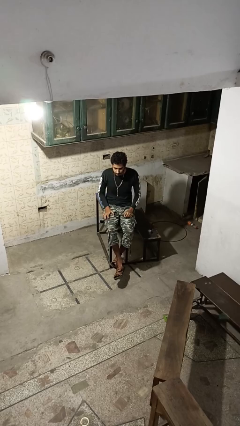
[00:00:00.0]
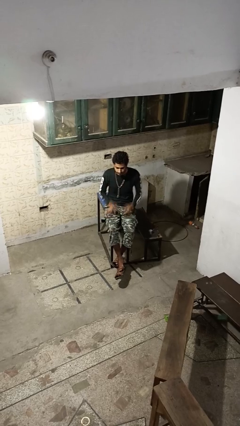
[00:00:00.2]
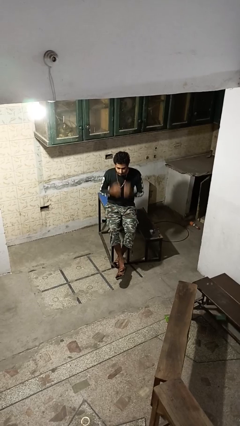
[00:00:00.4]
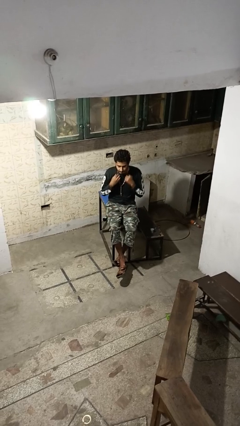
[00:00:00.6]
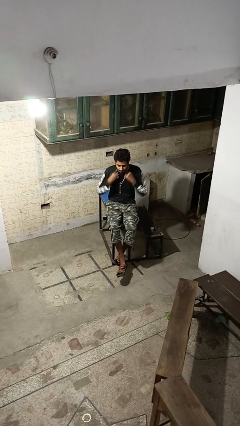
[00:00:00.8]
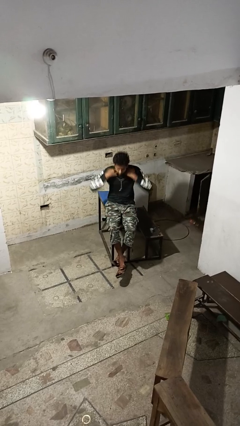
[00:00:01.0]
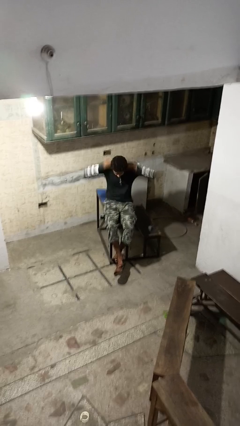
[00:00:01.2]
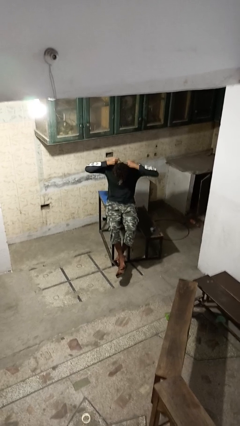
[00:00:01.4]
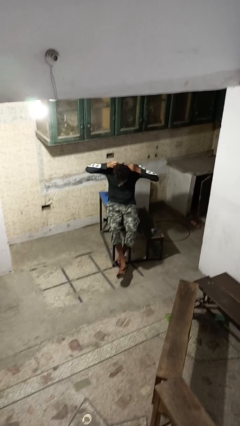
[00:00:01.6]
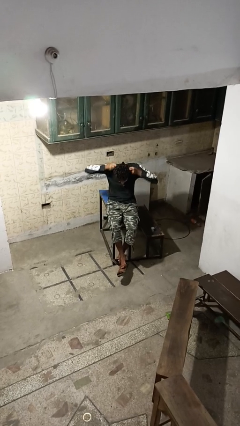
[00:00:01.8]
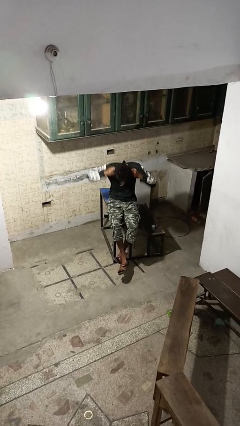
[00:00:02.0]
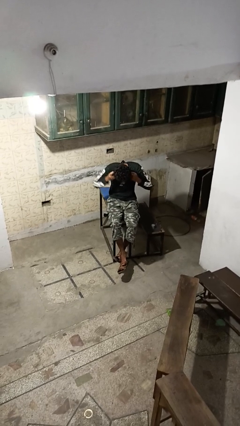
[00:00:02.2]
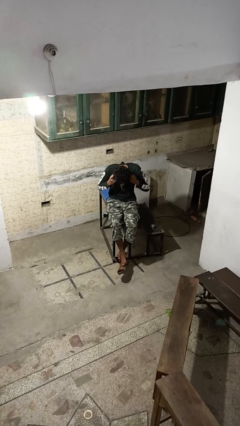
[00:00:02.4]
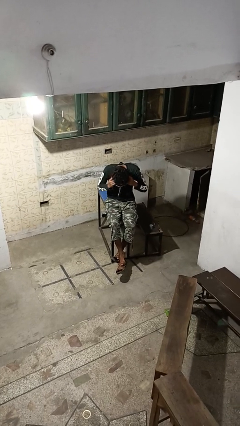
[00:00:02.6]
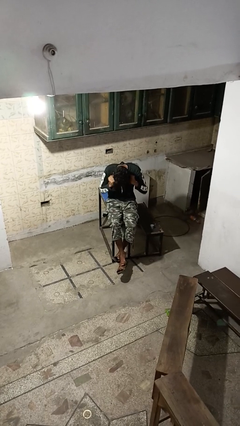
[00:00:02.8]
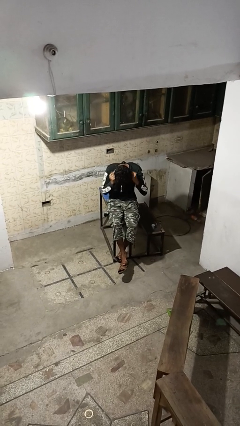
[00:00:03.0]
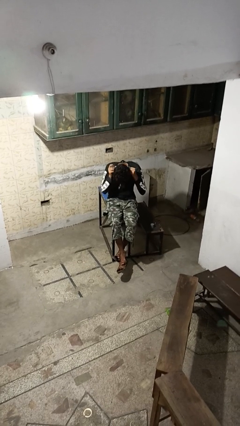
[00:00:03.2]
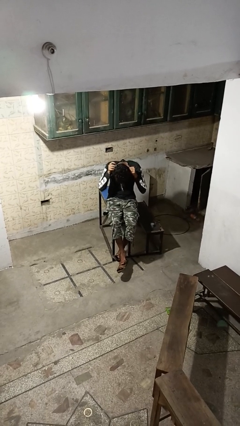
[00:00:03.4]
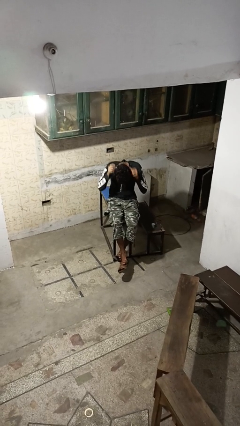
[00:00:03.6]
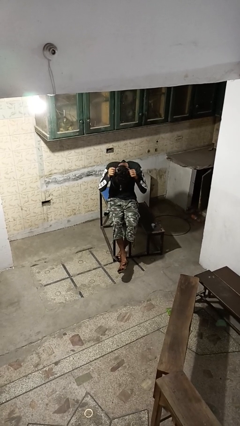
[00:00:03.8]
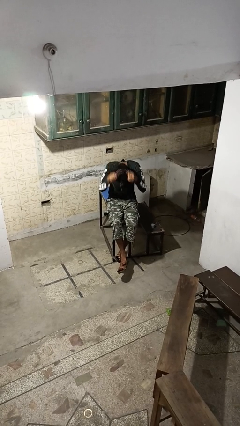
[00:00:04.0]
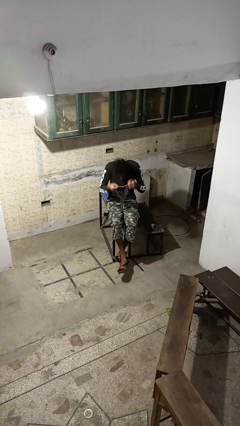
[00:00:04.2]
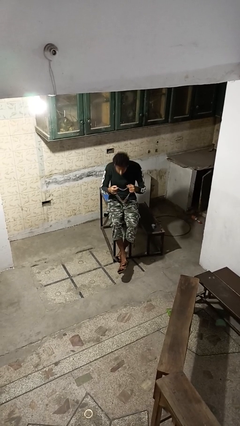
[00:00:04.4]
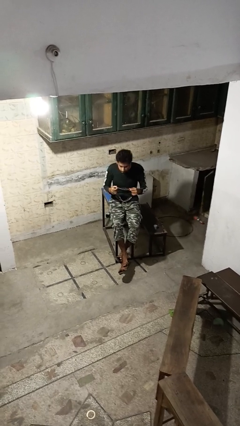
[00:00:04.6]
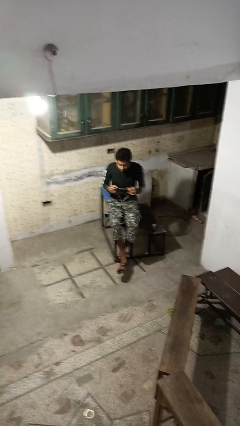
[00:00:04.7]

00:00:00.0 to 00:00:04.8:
person takes off necklace

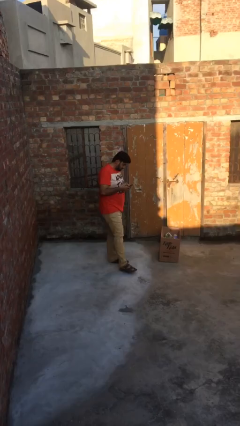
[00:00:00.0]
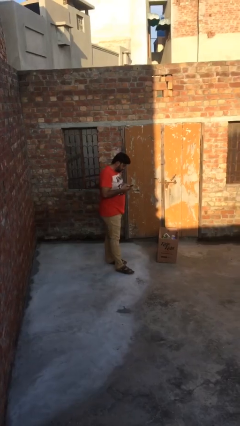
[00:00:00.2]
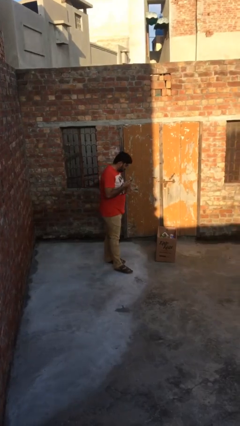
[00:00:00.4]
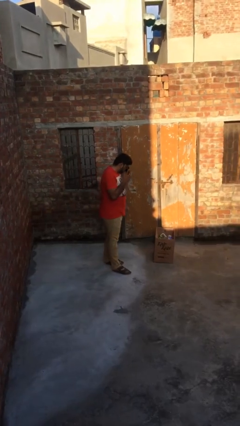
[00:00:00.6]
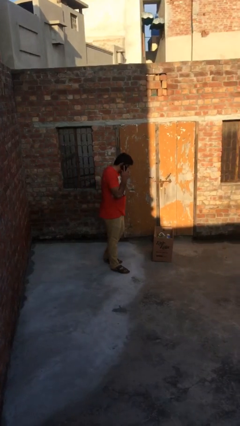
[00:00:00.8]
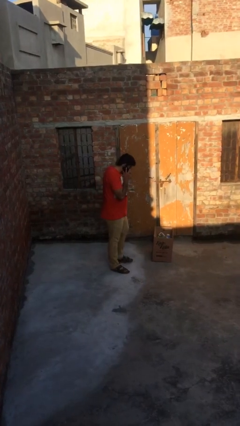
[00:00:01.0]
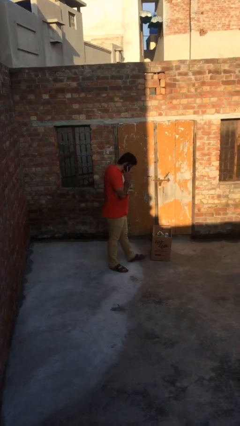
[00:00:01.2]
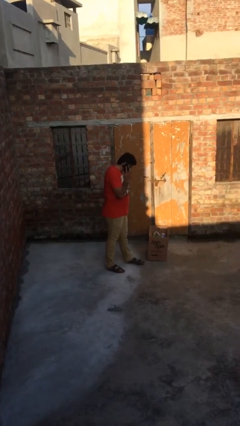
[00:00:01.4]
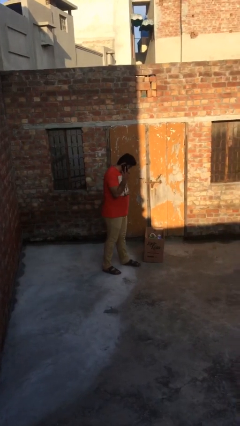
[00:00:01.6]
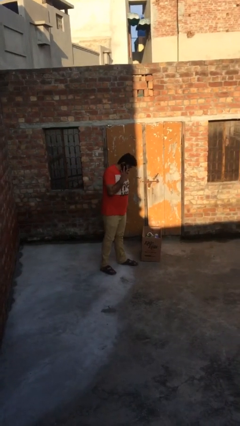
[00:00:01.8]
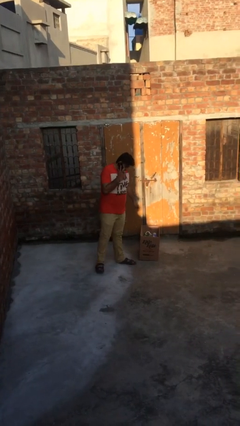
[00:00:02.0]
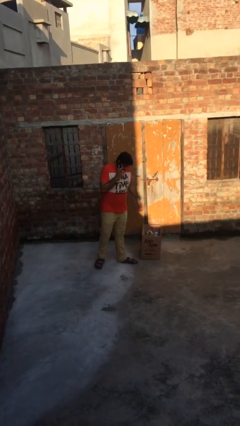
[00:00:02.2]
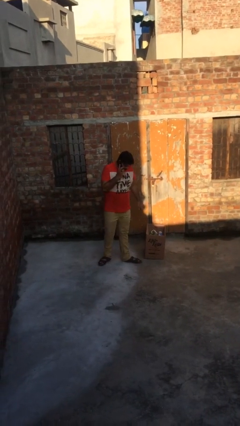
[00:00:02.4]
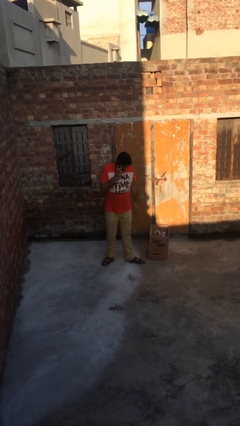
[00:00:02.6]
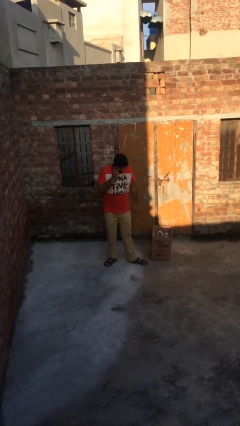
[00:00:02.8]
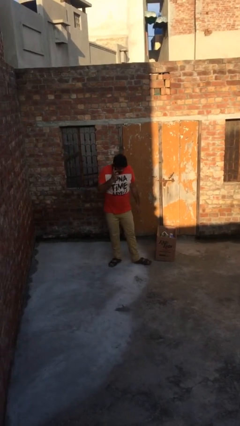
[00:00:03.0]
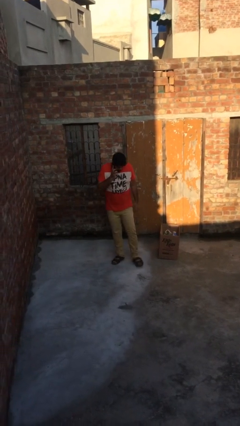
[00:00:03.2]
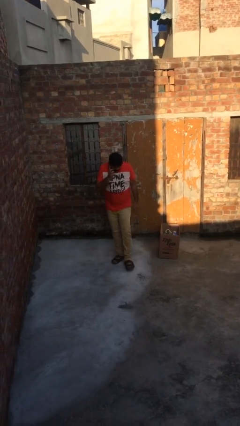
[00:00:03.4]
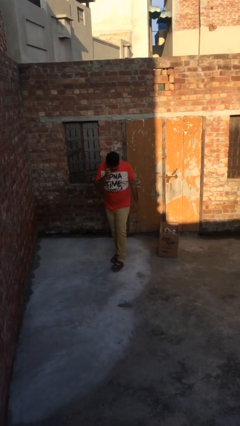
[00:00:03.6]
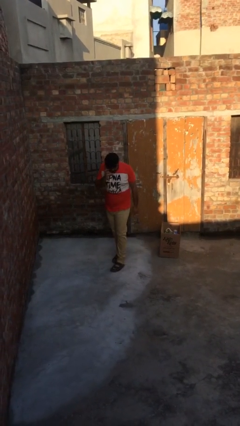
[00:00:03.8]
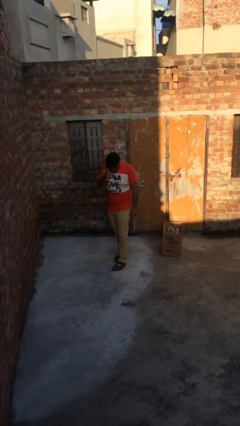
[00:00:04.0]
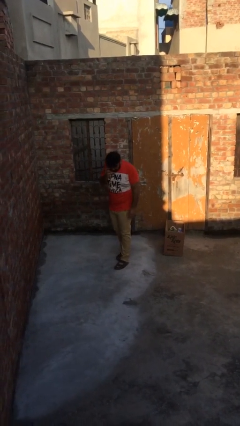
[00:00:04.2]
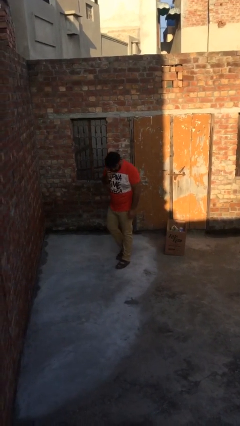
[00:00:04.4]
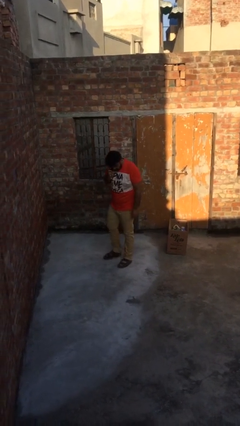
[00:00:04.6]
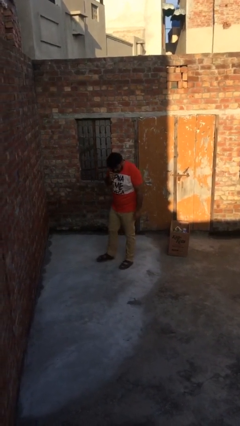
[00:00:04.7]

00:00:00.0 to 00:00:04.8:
person talks on phone

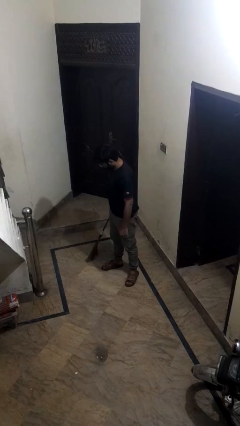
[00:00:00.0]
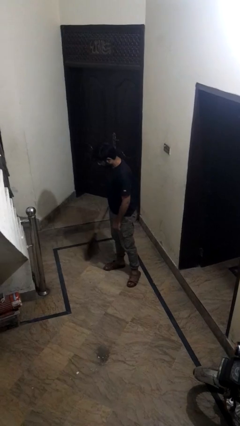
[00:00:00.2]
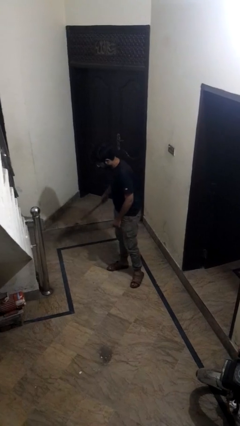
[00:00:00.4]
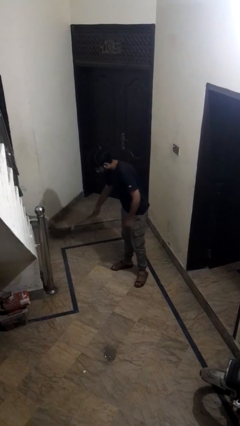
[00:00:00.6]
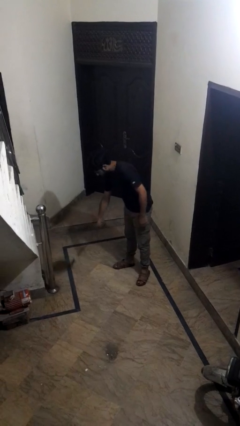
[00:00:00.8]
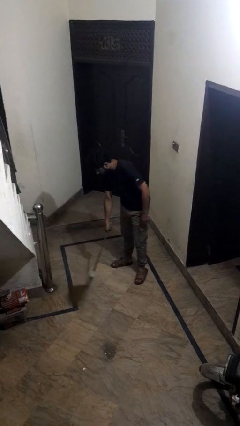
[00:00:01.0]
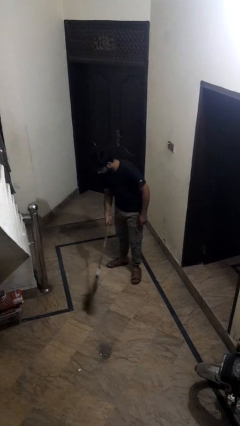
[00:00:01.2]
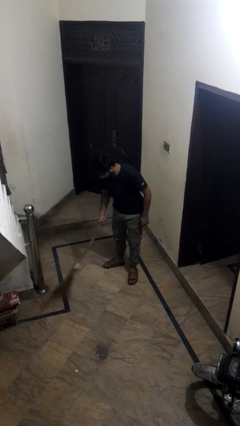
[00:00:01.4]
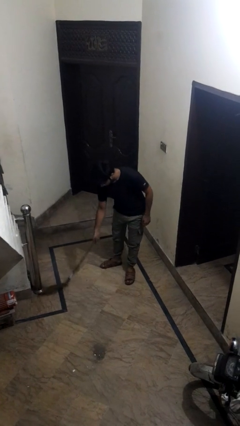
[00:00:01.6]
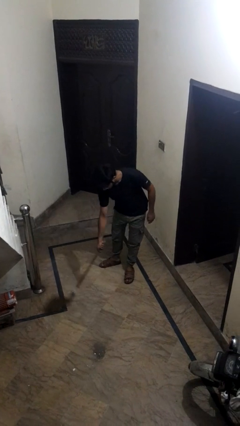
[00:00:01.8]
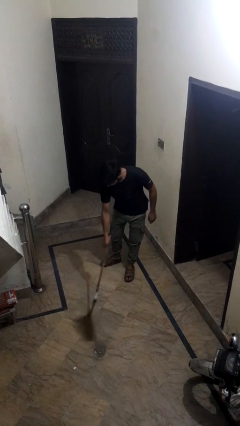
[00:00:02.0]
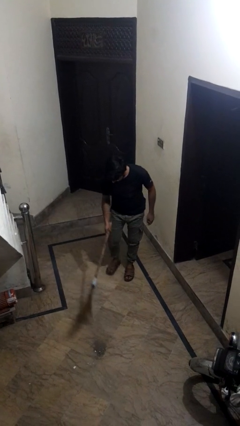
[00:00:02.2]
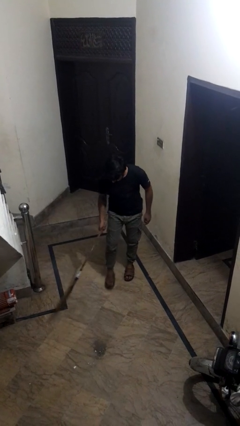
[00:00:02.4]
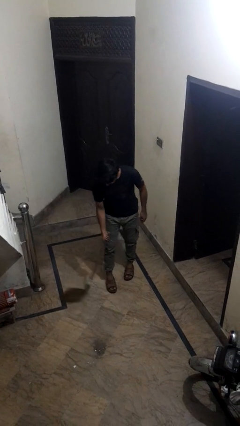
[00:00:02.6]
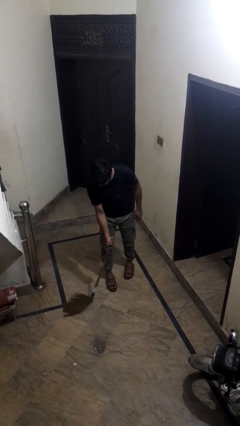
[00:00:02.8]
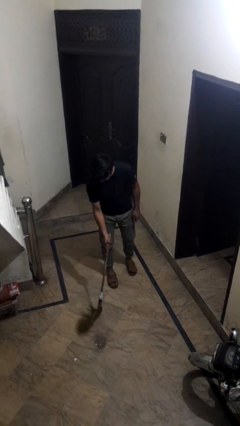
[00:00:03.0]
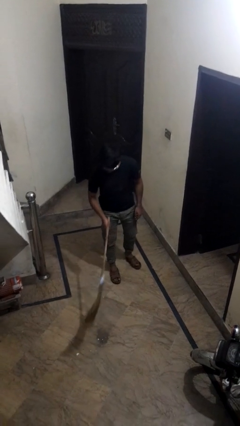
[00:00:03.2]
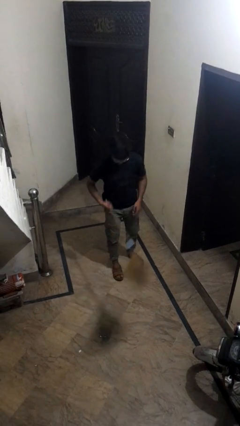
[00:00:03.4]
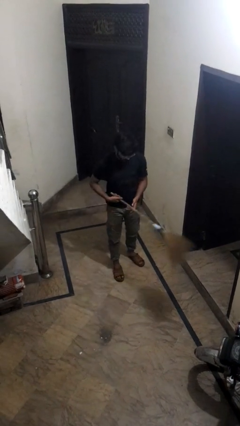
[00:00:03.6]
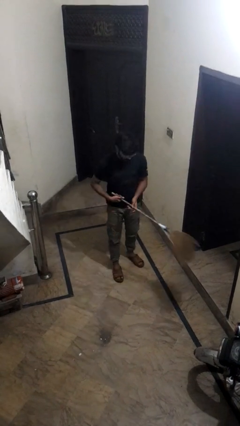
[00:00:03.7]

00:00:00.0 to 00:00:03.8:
person sweeps floor

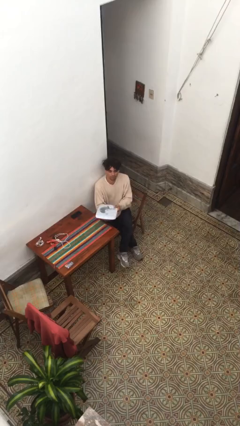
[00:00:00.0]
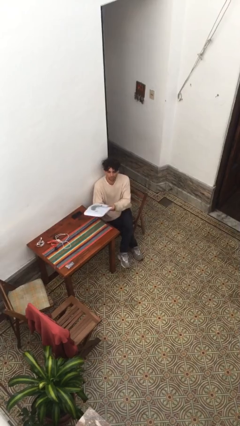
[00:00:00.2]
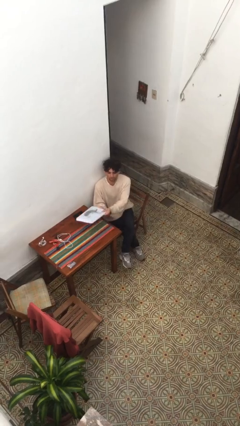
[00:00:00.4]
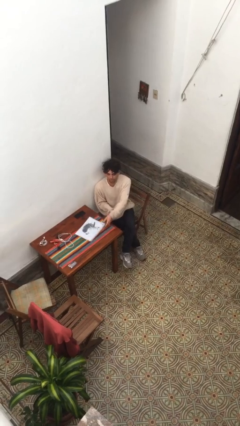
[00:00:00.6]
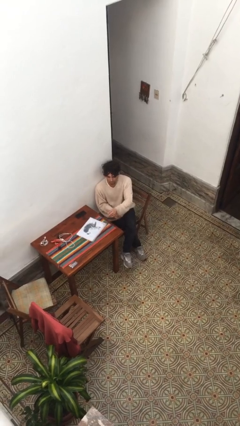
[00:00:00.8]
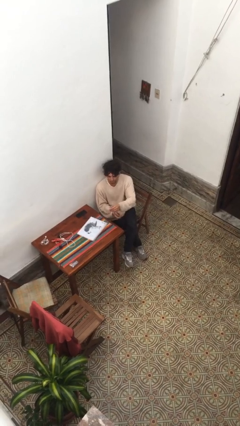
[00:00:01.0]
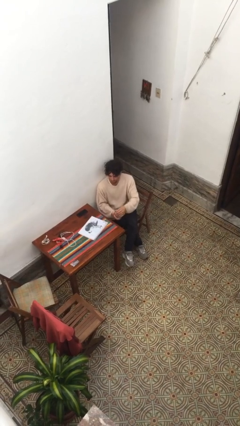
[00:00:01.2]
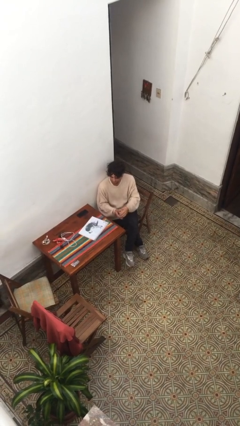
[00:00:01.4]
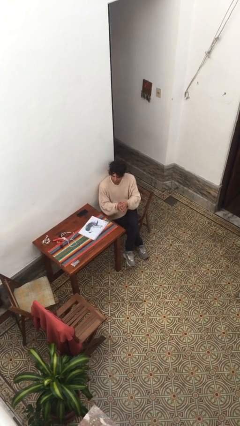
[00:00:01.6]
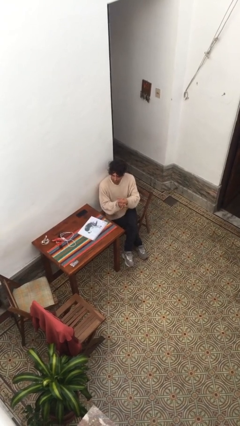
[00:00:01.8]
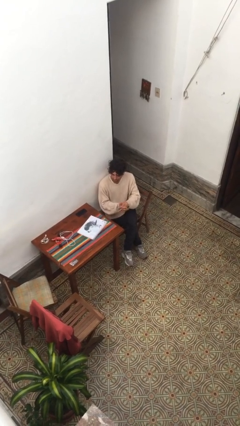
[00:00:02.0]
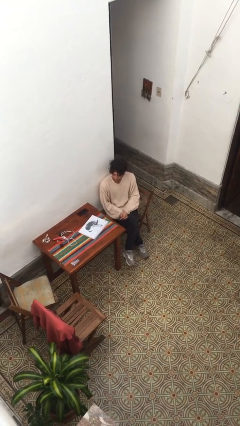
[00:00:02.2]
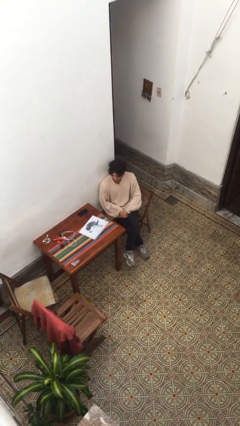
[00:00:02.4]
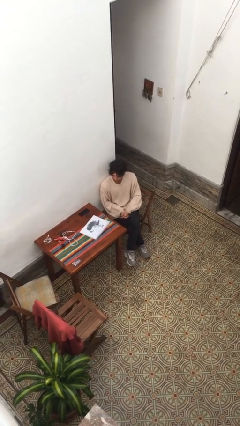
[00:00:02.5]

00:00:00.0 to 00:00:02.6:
person puts down object on table

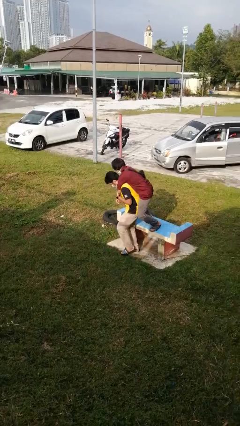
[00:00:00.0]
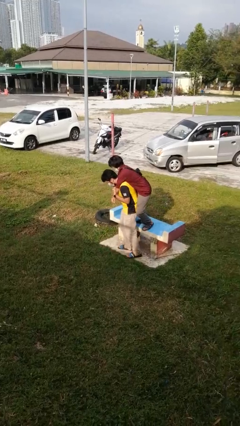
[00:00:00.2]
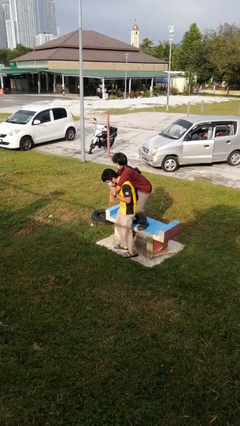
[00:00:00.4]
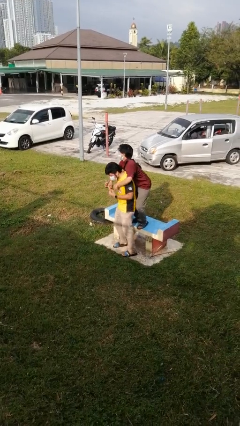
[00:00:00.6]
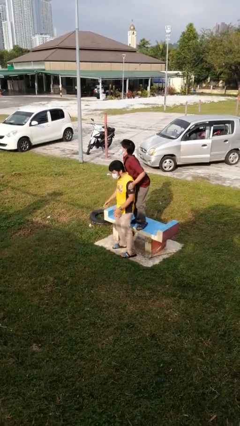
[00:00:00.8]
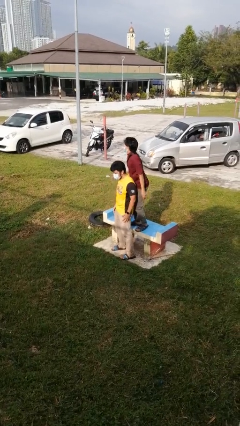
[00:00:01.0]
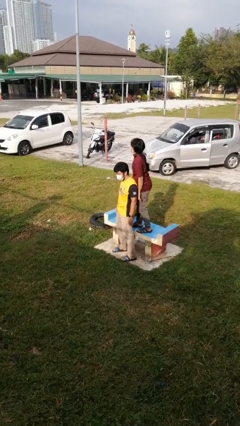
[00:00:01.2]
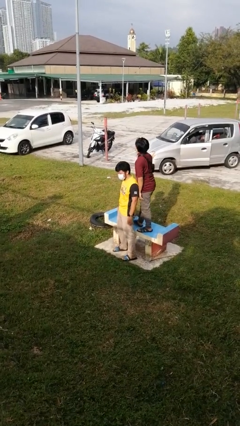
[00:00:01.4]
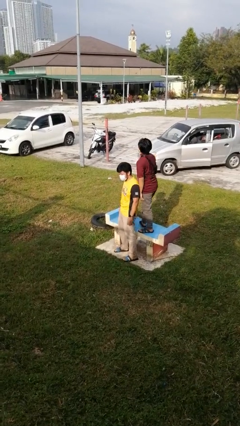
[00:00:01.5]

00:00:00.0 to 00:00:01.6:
person puts down person
